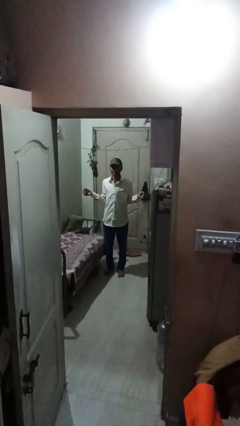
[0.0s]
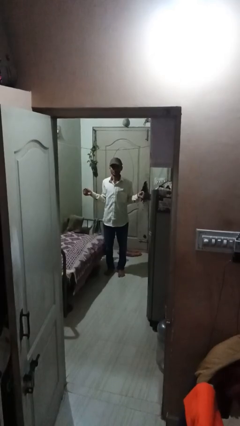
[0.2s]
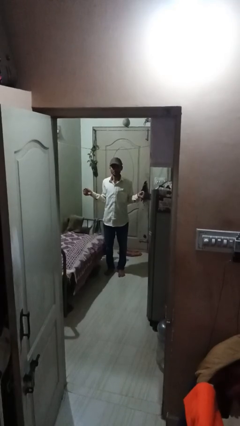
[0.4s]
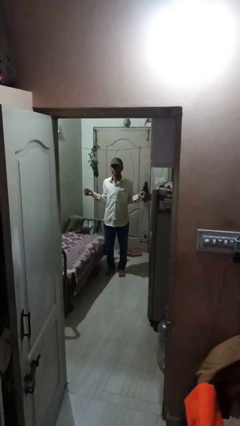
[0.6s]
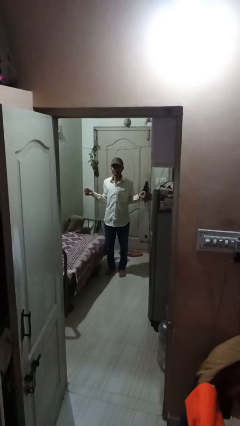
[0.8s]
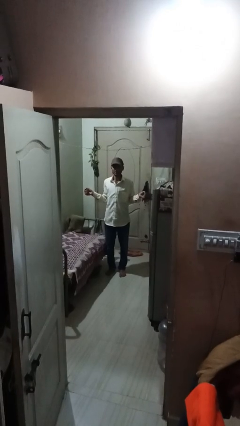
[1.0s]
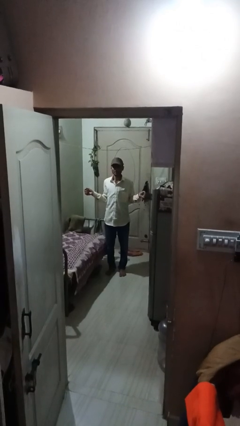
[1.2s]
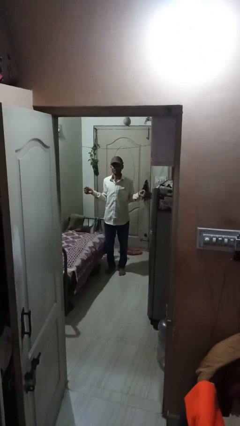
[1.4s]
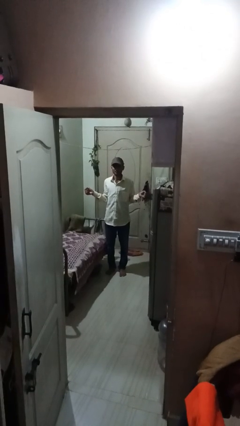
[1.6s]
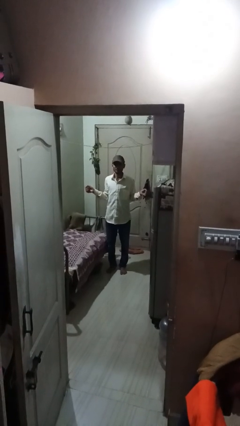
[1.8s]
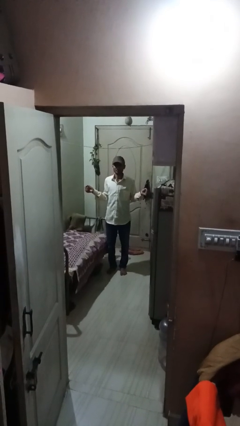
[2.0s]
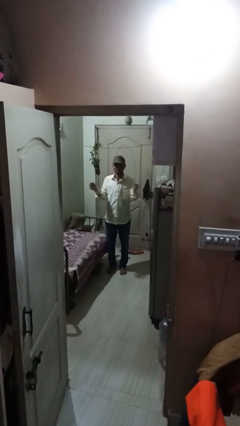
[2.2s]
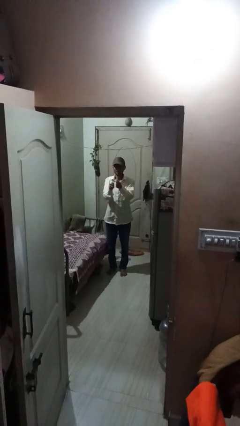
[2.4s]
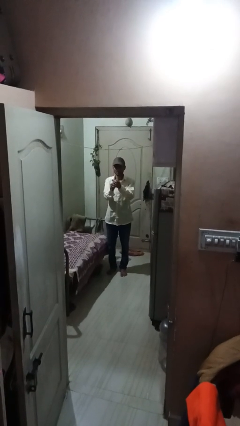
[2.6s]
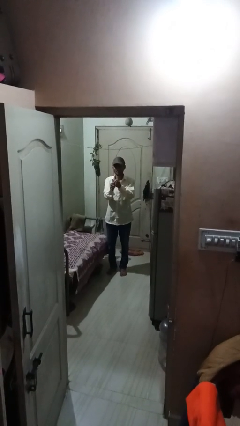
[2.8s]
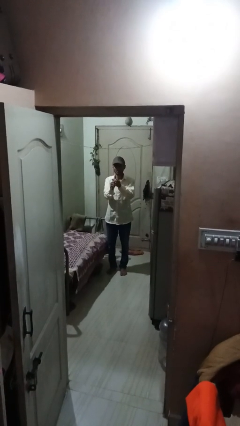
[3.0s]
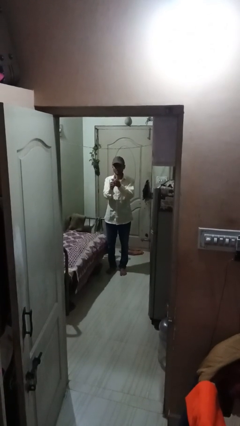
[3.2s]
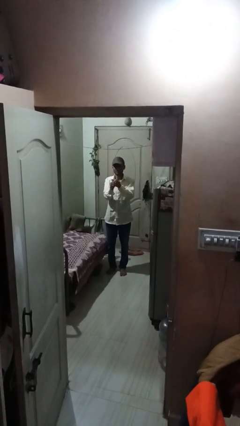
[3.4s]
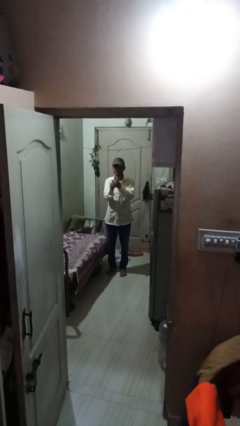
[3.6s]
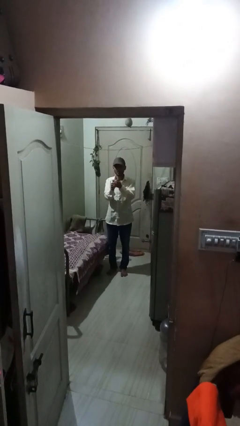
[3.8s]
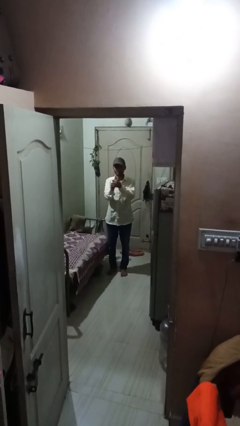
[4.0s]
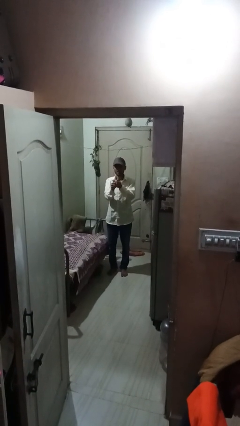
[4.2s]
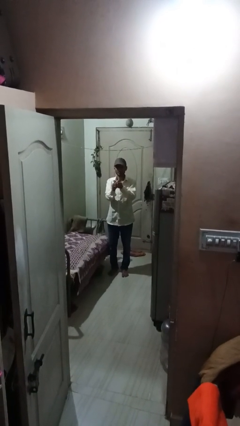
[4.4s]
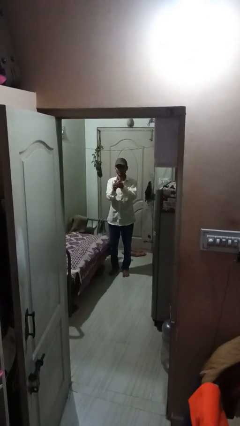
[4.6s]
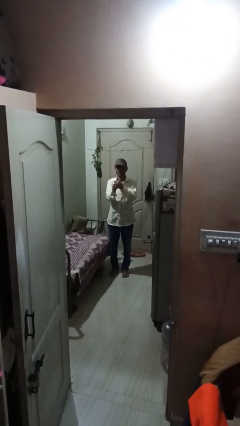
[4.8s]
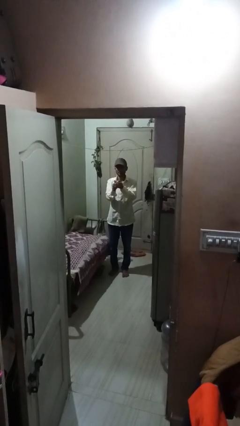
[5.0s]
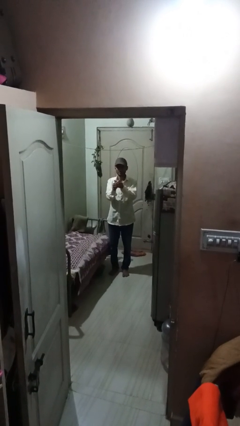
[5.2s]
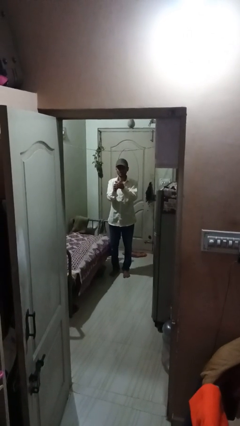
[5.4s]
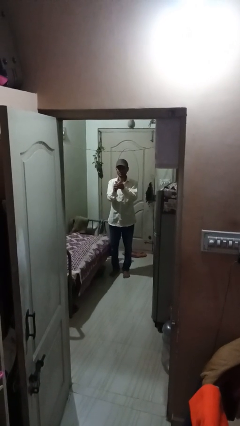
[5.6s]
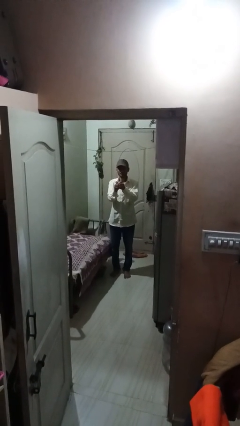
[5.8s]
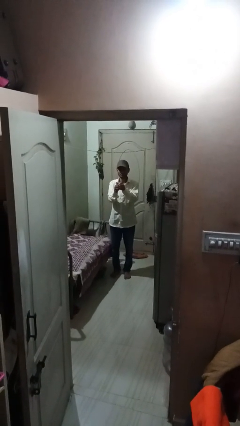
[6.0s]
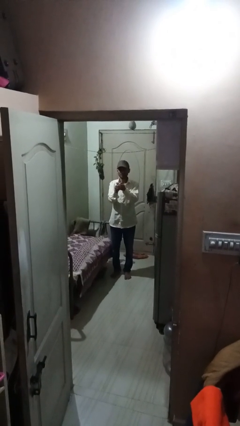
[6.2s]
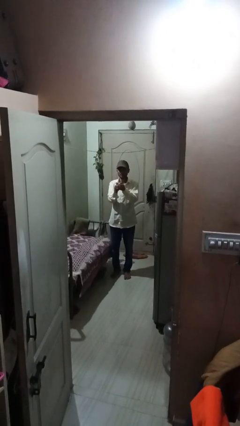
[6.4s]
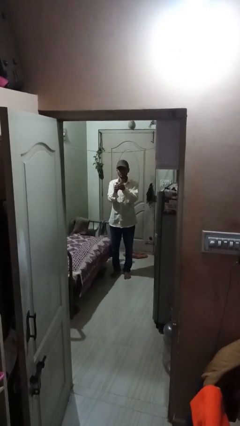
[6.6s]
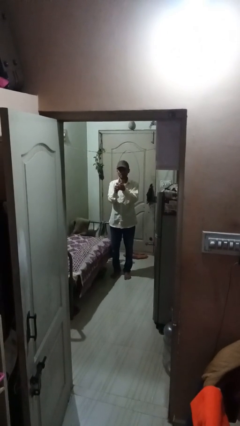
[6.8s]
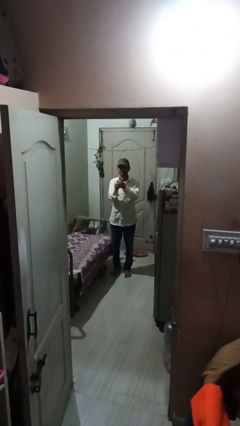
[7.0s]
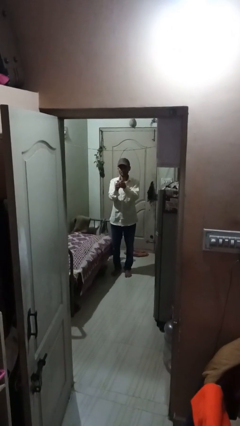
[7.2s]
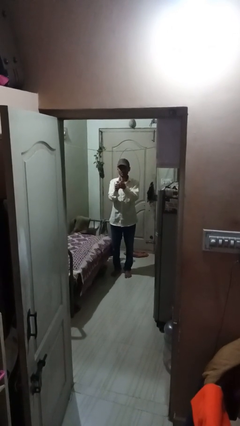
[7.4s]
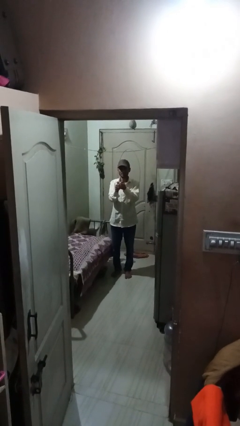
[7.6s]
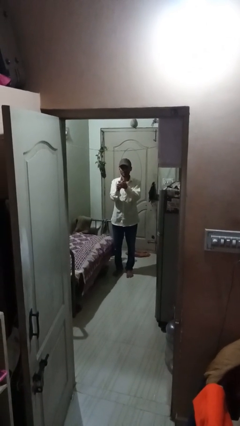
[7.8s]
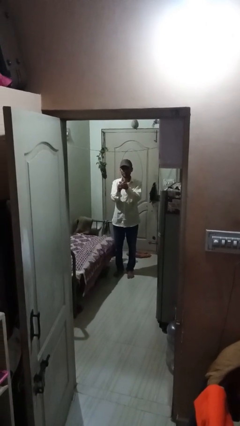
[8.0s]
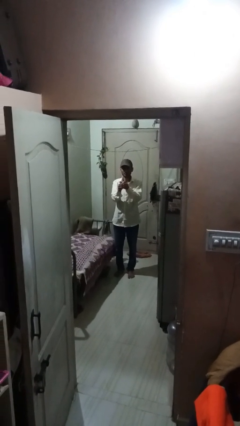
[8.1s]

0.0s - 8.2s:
person gestures zoom in

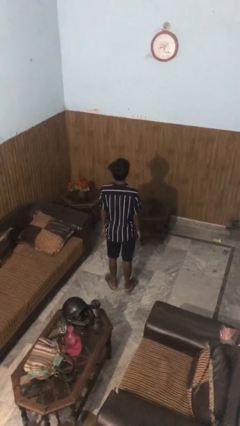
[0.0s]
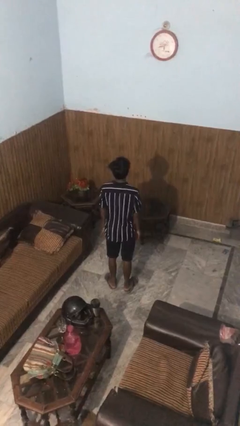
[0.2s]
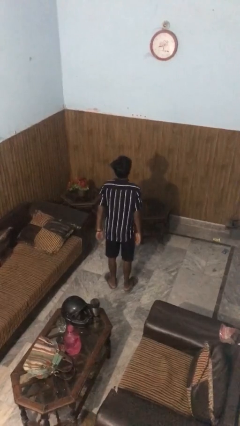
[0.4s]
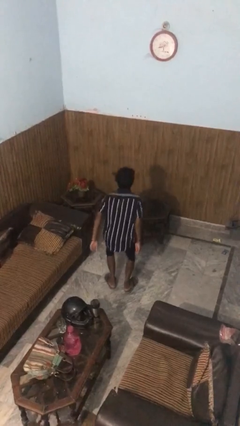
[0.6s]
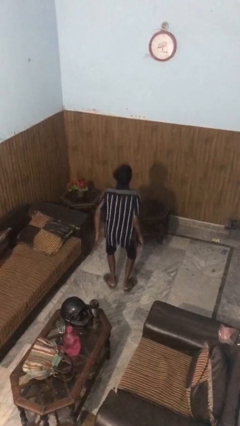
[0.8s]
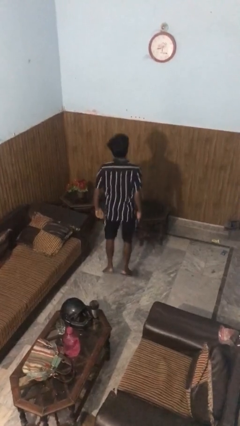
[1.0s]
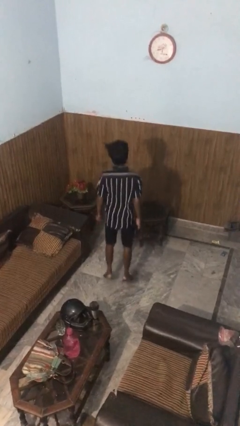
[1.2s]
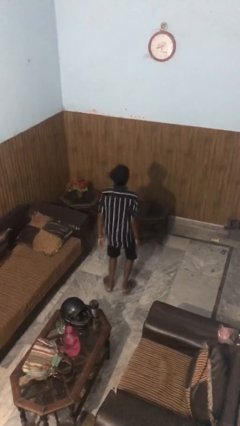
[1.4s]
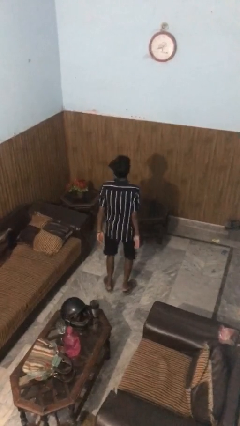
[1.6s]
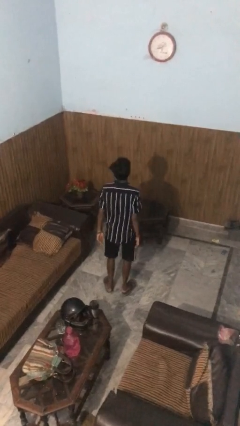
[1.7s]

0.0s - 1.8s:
person jumps

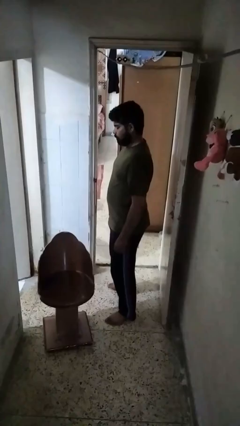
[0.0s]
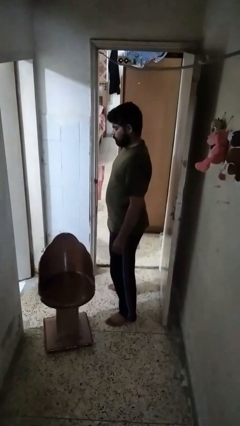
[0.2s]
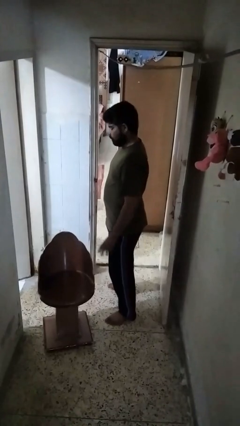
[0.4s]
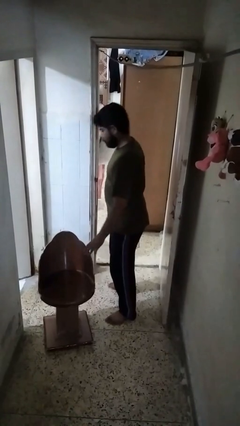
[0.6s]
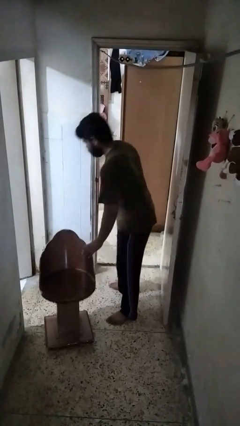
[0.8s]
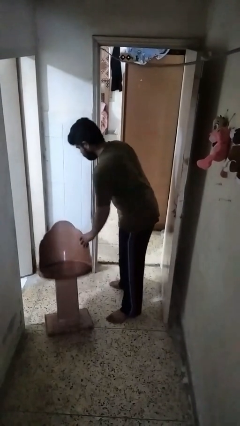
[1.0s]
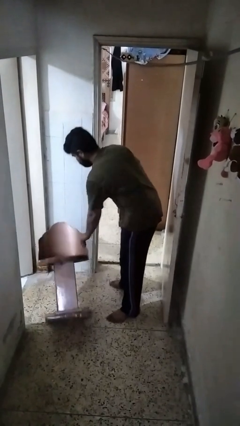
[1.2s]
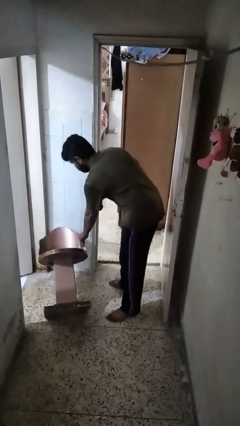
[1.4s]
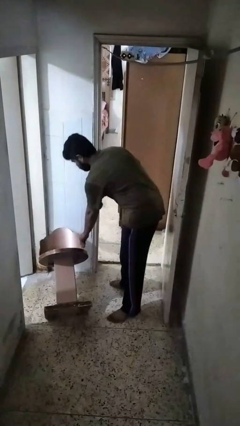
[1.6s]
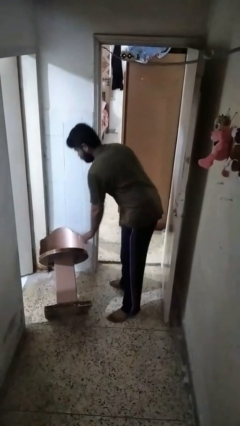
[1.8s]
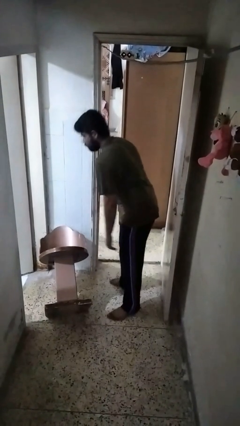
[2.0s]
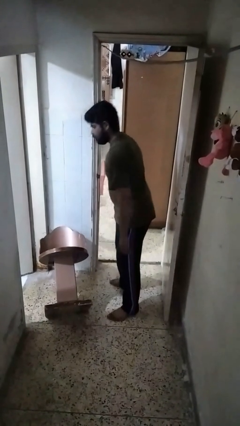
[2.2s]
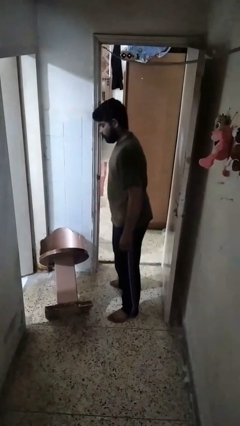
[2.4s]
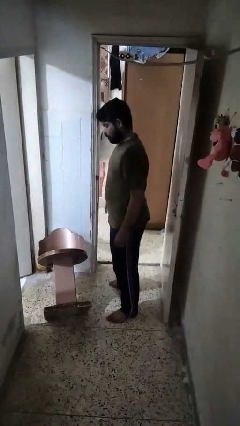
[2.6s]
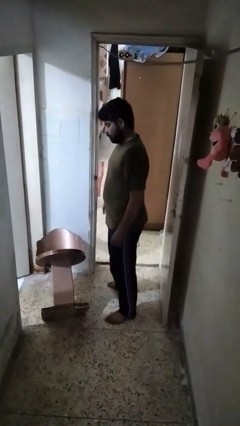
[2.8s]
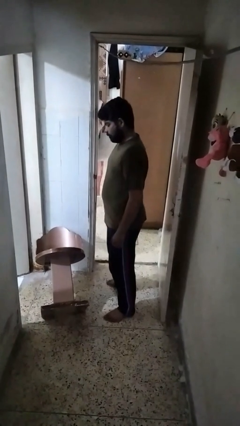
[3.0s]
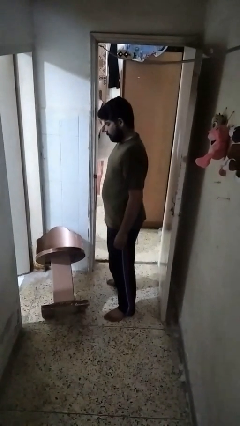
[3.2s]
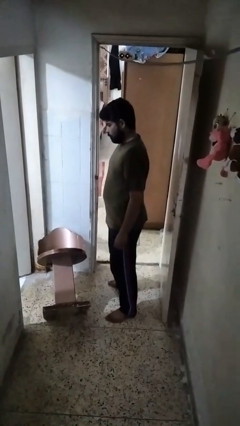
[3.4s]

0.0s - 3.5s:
person knocks over furniture

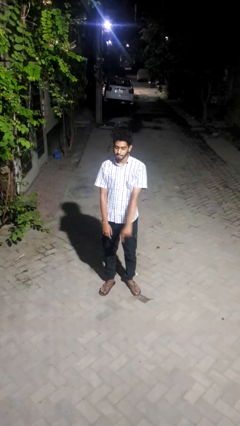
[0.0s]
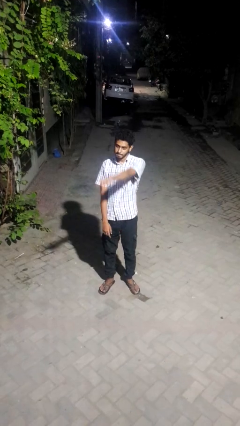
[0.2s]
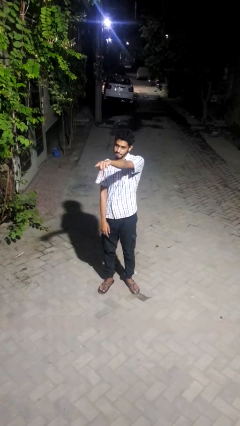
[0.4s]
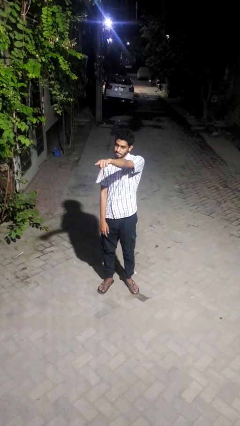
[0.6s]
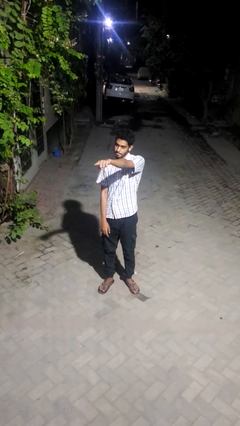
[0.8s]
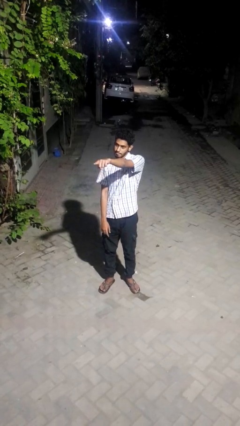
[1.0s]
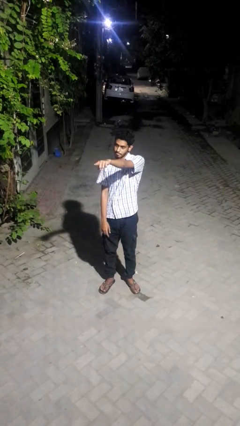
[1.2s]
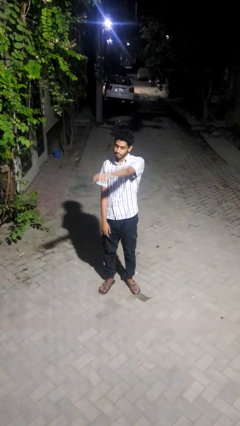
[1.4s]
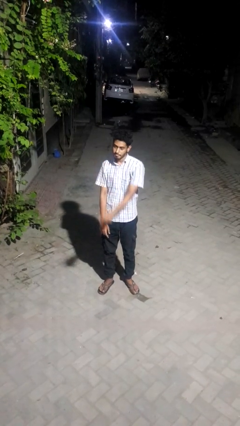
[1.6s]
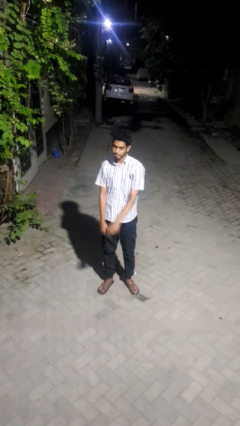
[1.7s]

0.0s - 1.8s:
person points at person

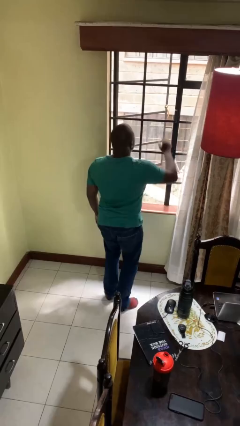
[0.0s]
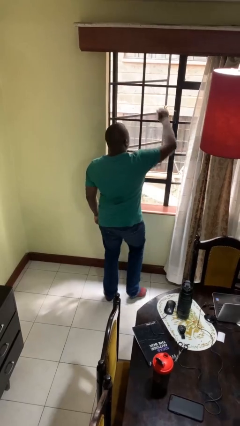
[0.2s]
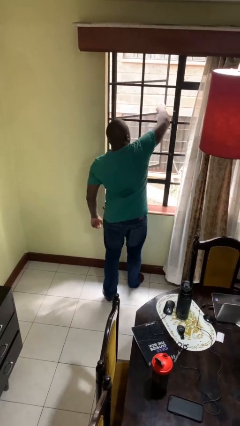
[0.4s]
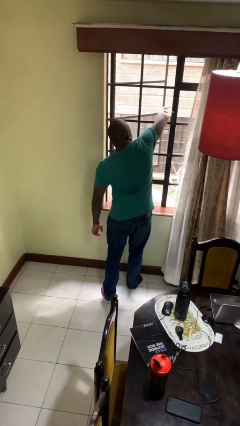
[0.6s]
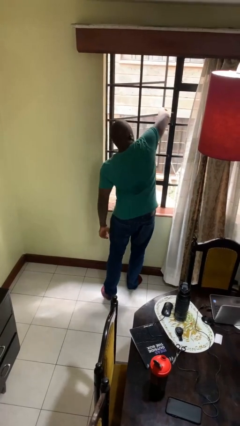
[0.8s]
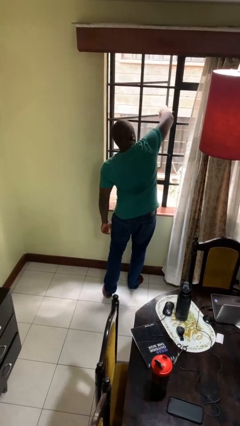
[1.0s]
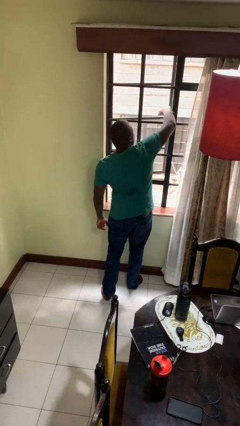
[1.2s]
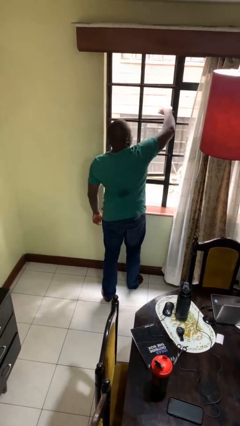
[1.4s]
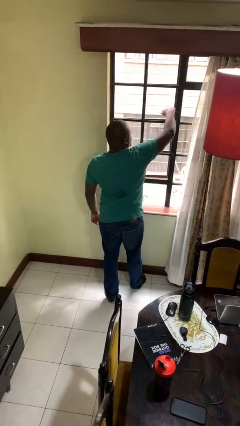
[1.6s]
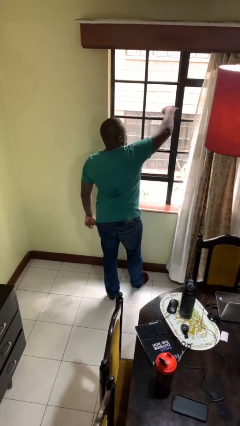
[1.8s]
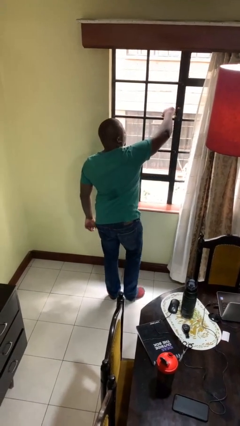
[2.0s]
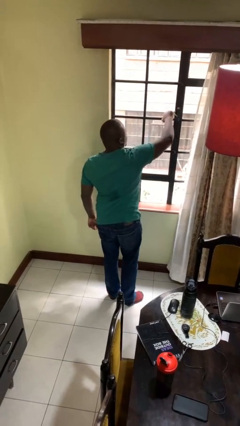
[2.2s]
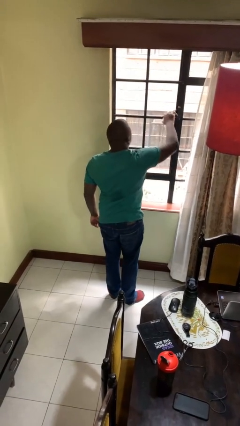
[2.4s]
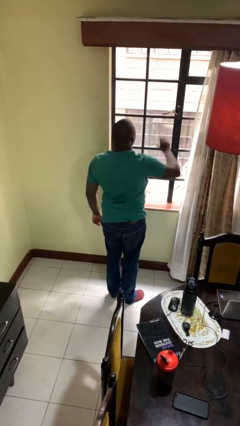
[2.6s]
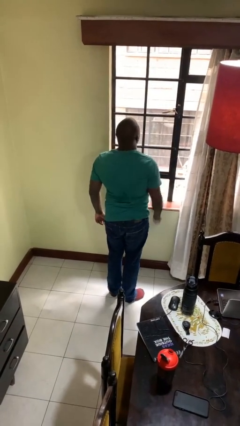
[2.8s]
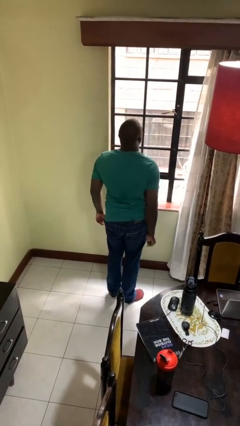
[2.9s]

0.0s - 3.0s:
person closes home window
